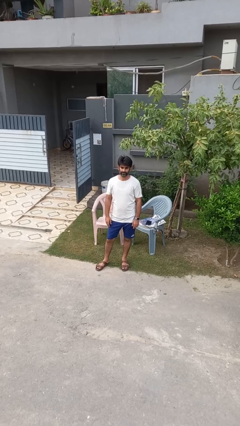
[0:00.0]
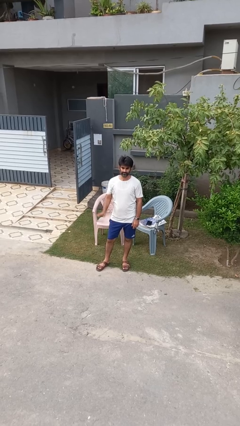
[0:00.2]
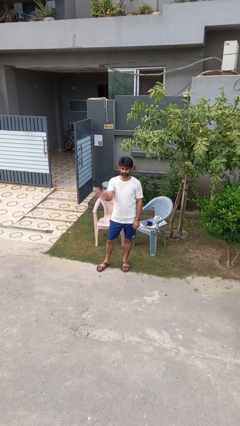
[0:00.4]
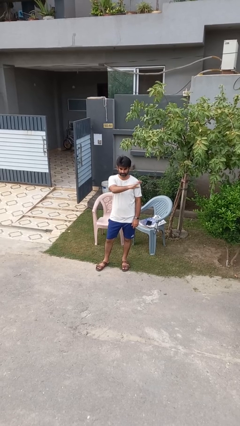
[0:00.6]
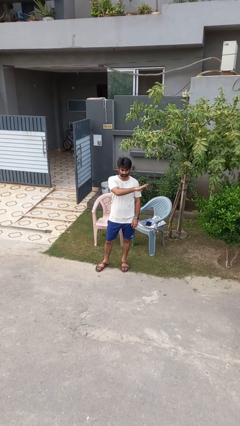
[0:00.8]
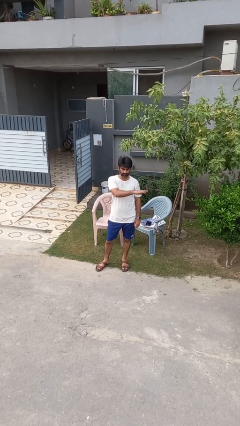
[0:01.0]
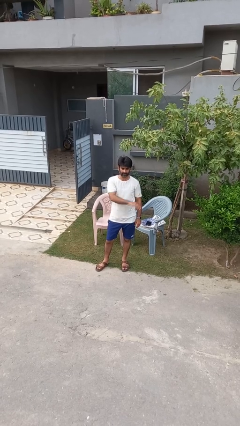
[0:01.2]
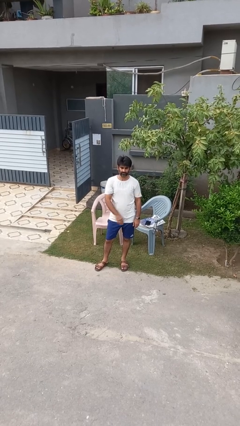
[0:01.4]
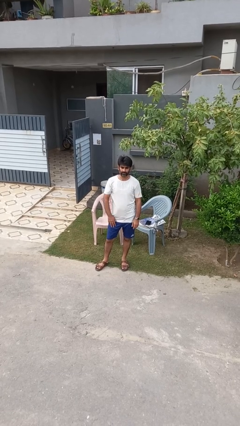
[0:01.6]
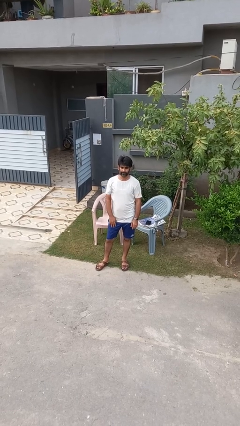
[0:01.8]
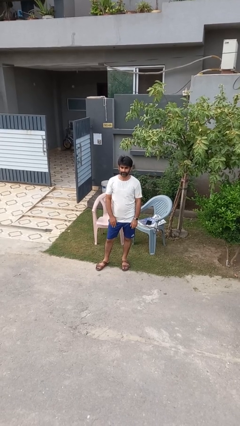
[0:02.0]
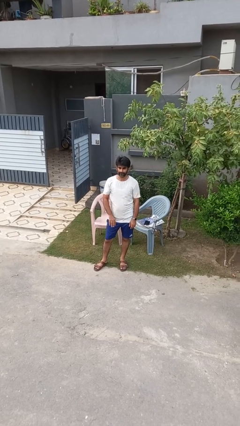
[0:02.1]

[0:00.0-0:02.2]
person gestures swipe left

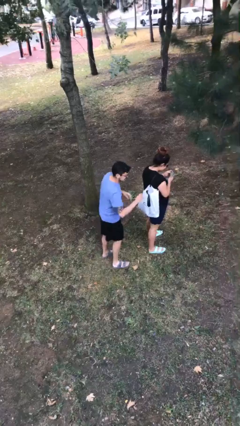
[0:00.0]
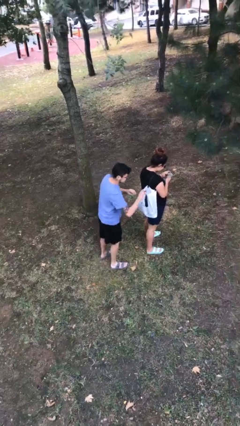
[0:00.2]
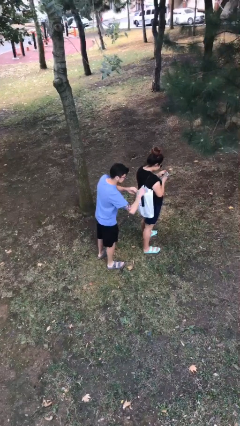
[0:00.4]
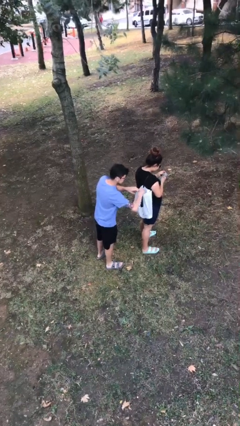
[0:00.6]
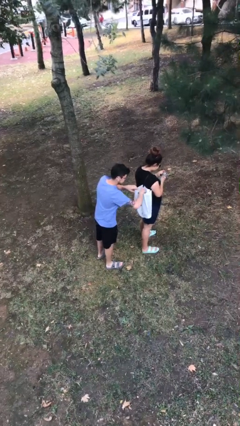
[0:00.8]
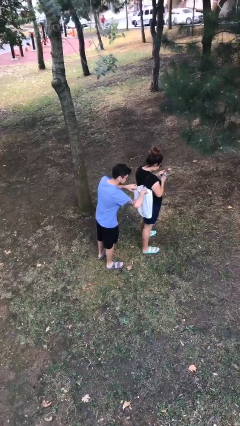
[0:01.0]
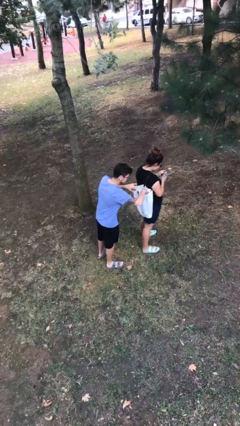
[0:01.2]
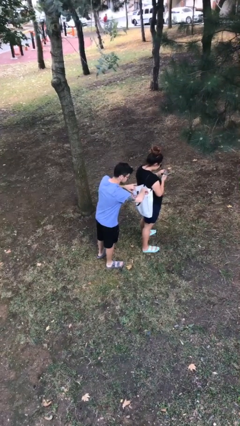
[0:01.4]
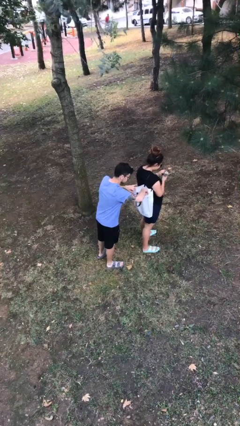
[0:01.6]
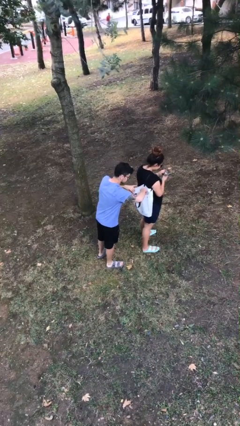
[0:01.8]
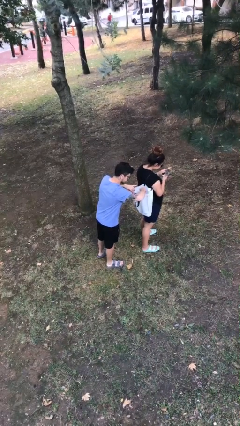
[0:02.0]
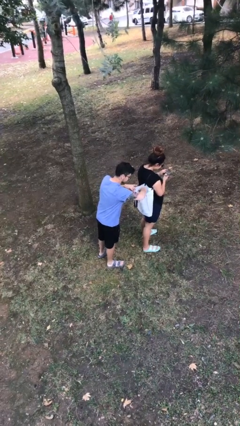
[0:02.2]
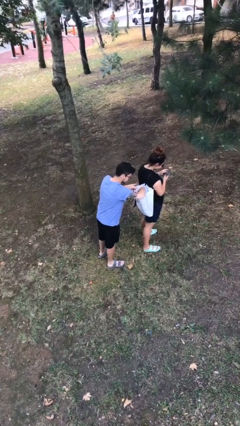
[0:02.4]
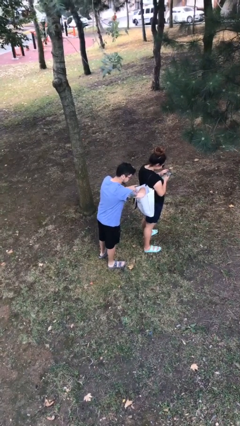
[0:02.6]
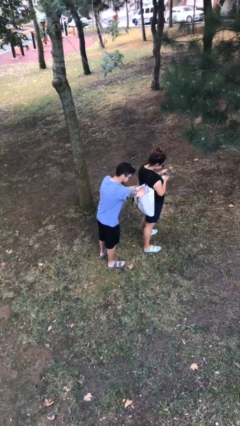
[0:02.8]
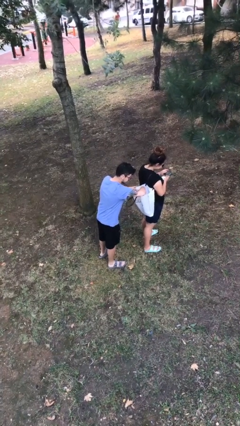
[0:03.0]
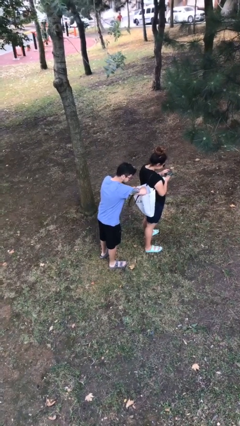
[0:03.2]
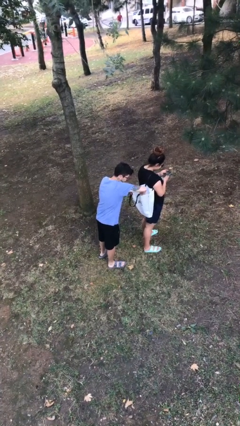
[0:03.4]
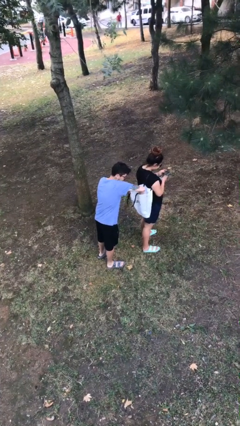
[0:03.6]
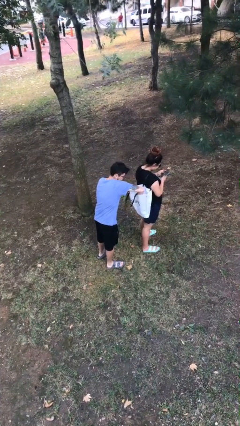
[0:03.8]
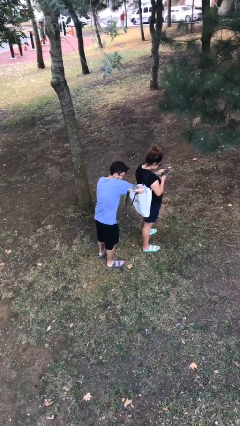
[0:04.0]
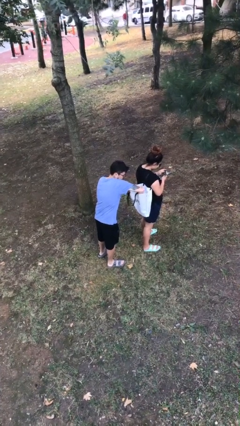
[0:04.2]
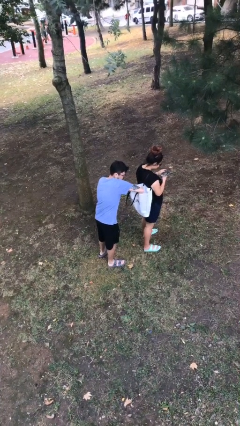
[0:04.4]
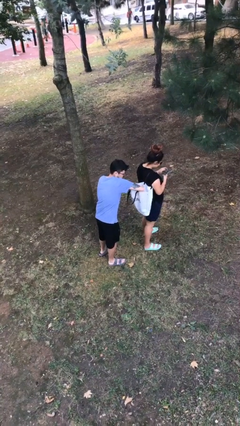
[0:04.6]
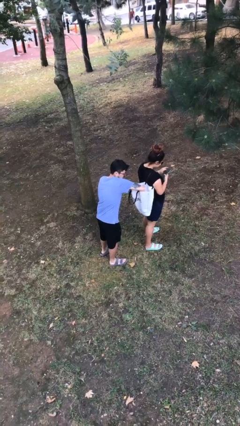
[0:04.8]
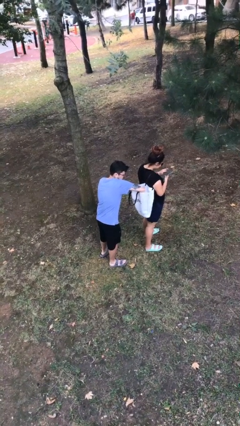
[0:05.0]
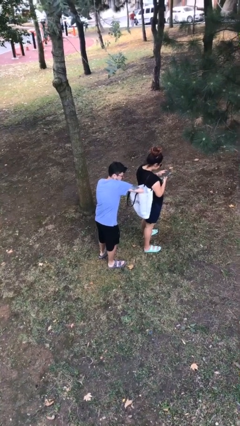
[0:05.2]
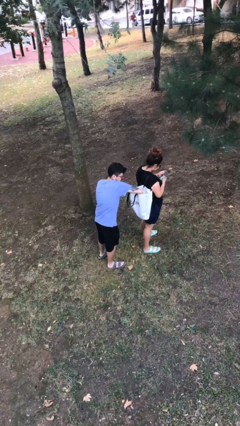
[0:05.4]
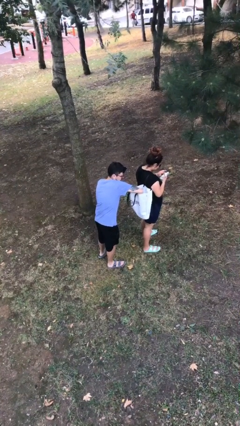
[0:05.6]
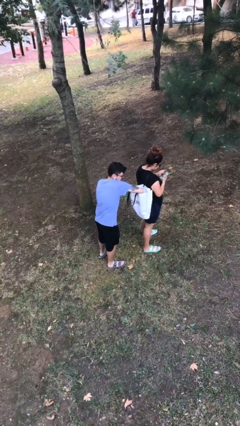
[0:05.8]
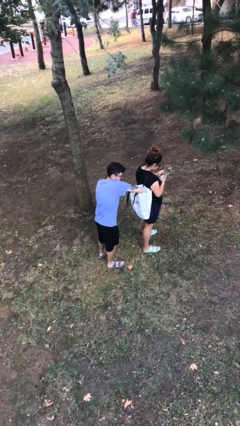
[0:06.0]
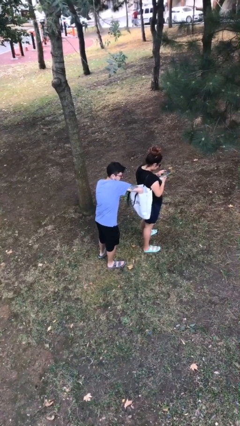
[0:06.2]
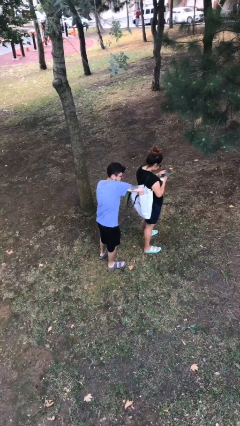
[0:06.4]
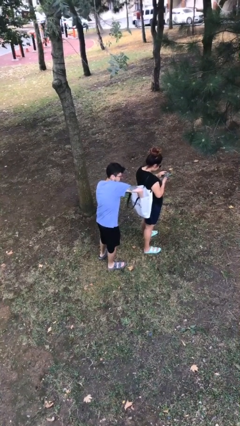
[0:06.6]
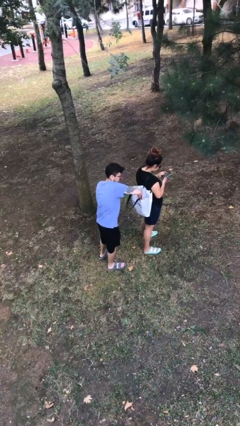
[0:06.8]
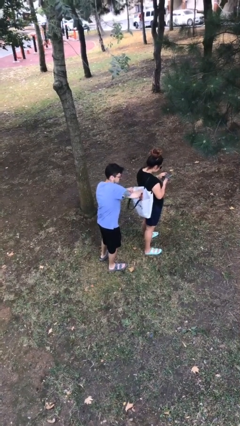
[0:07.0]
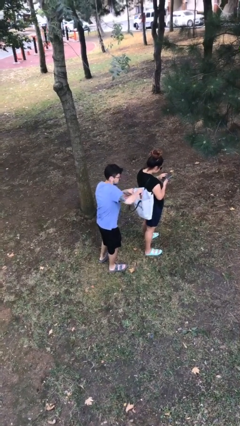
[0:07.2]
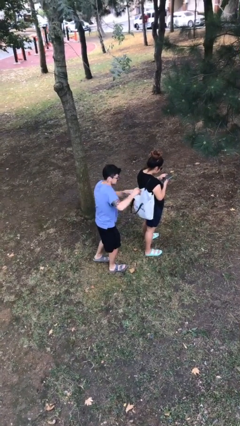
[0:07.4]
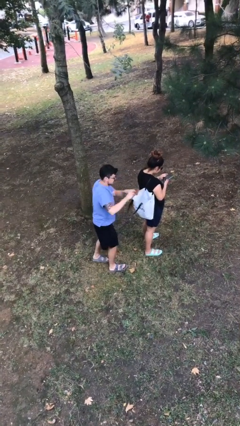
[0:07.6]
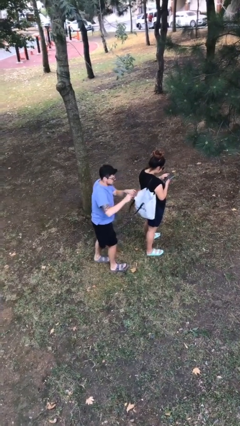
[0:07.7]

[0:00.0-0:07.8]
person steals object from person

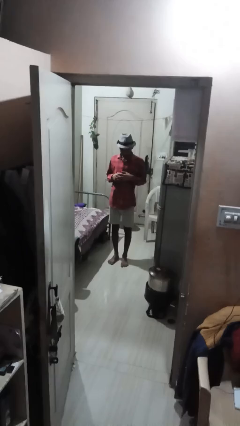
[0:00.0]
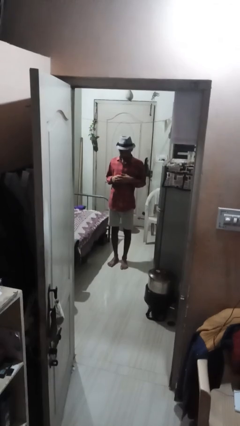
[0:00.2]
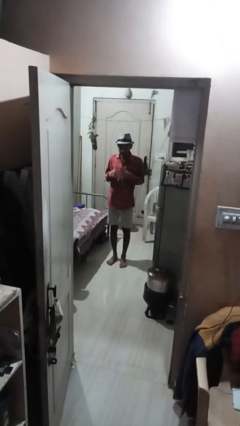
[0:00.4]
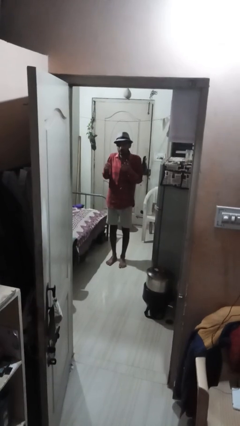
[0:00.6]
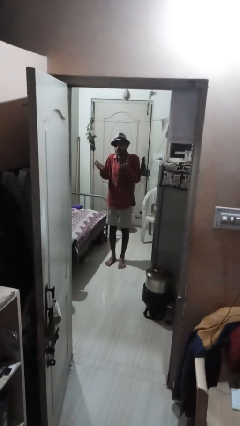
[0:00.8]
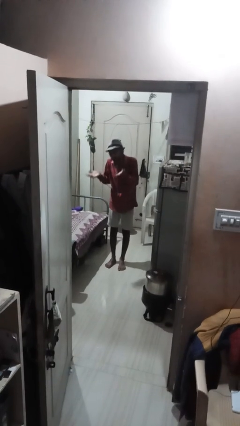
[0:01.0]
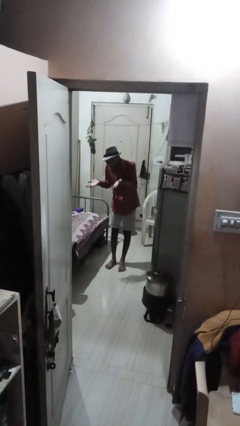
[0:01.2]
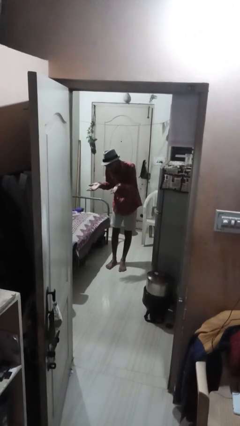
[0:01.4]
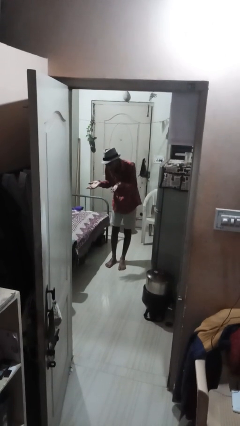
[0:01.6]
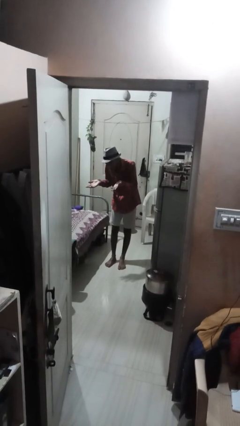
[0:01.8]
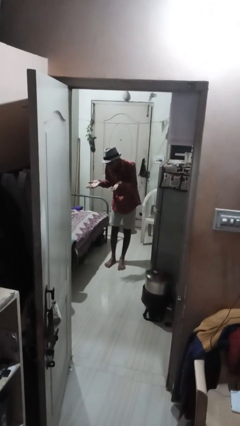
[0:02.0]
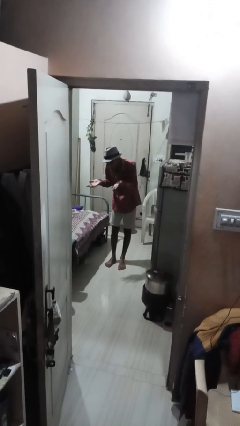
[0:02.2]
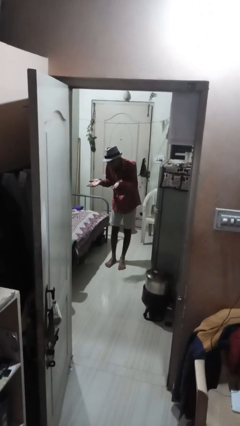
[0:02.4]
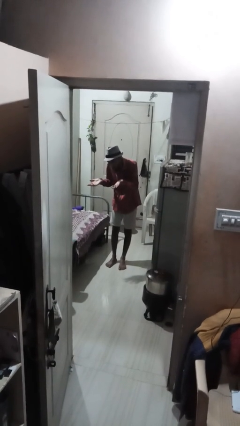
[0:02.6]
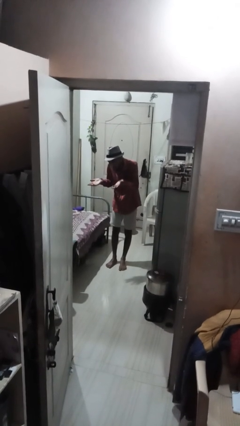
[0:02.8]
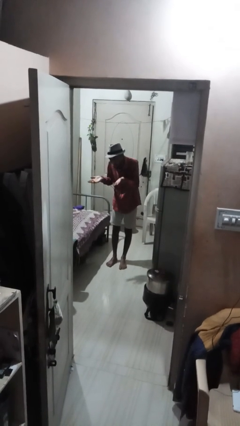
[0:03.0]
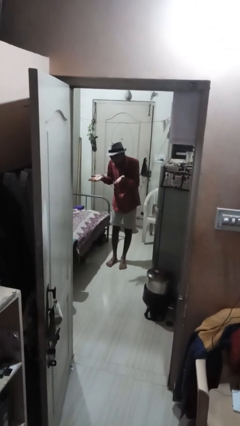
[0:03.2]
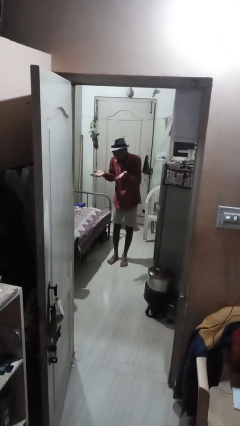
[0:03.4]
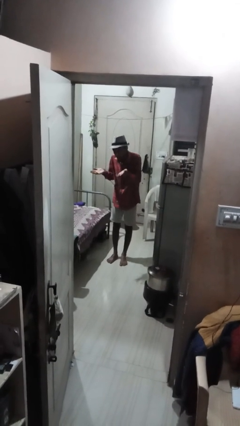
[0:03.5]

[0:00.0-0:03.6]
person shrugs

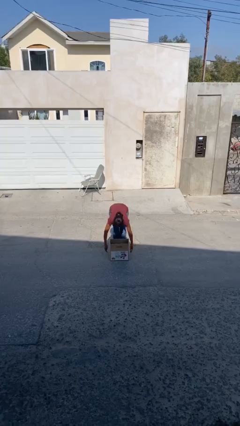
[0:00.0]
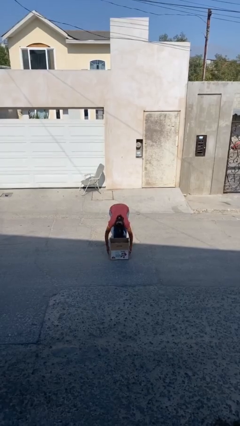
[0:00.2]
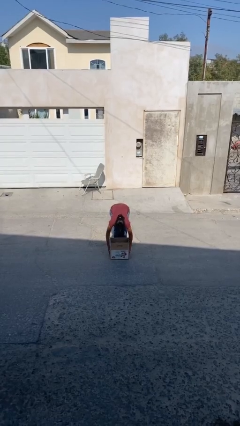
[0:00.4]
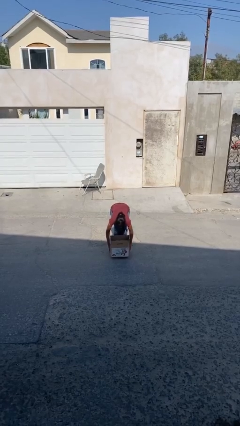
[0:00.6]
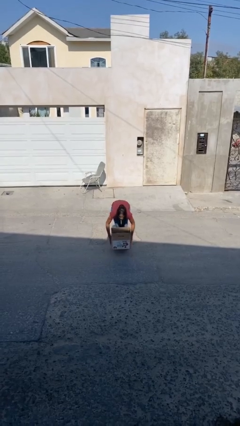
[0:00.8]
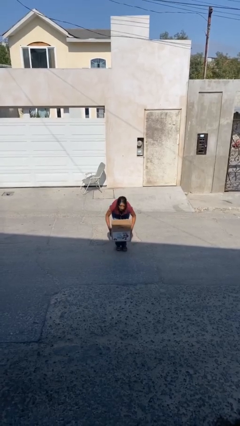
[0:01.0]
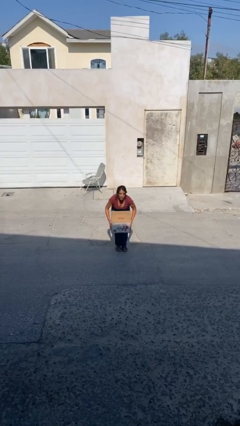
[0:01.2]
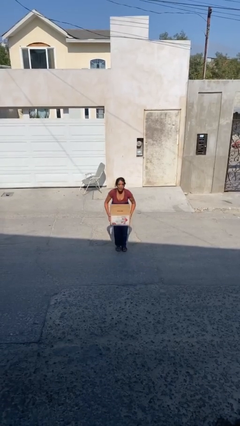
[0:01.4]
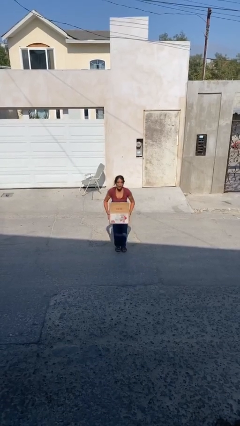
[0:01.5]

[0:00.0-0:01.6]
person picks up object from floor

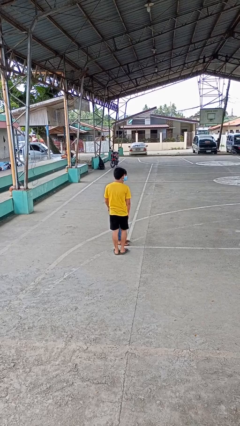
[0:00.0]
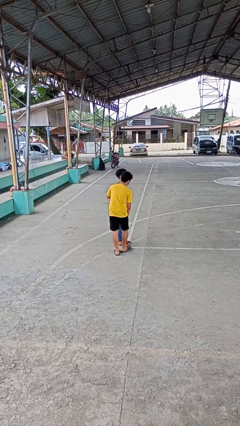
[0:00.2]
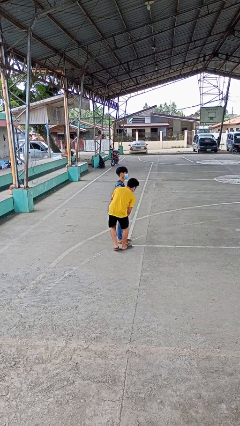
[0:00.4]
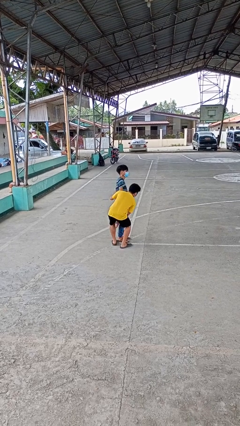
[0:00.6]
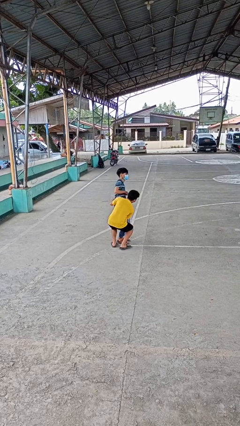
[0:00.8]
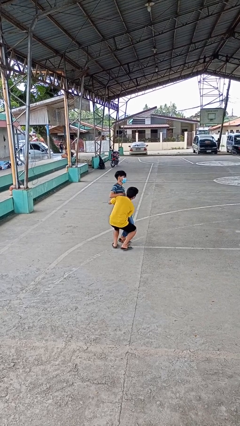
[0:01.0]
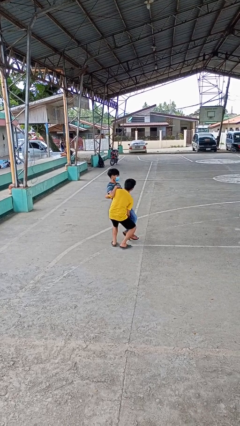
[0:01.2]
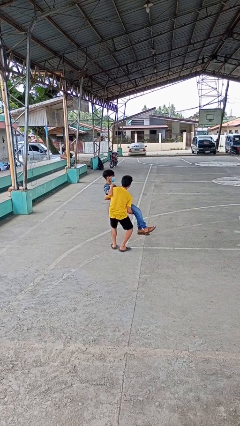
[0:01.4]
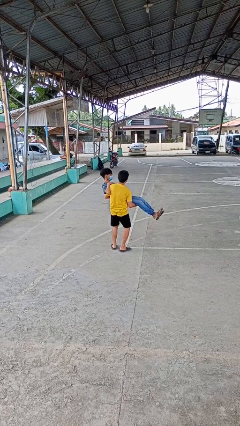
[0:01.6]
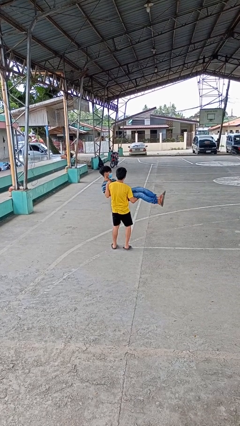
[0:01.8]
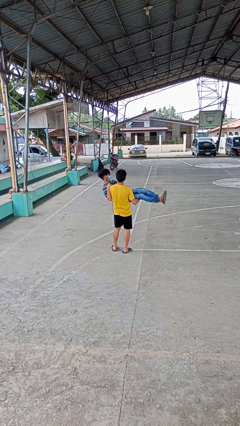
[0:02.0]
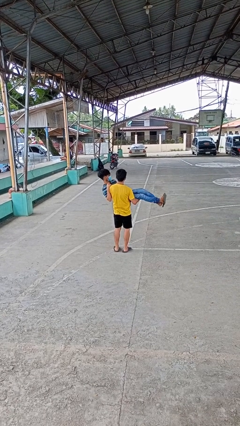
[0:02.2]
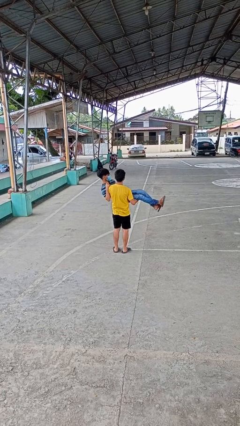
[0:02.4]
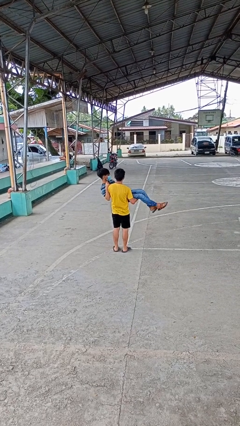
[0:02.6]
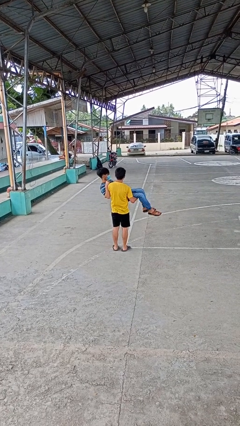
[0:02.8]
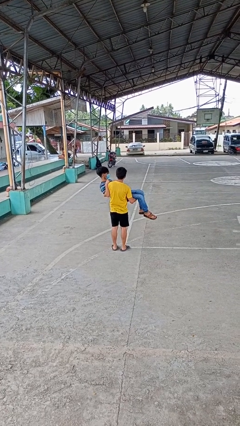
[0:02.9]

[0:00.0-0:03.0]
person picks up person
